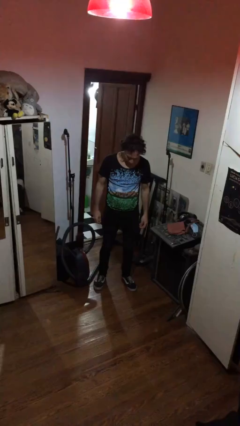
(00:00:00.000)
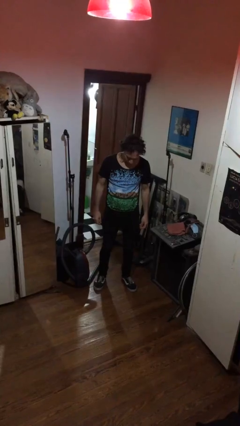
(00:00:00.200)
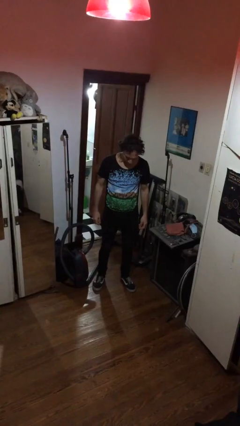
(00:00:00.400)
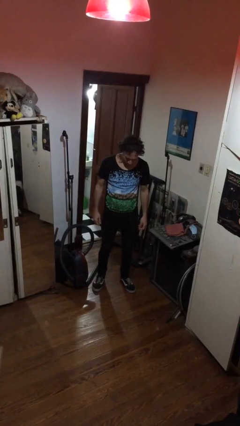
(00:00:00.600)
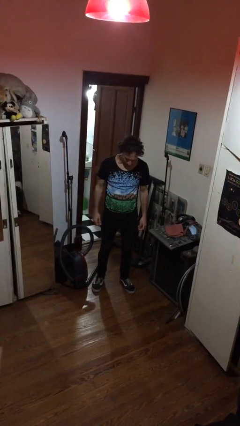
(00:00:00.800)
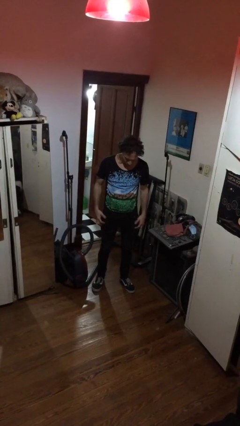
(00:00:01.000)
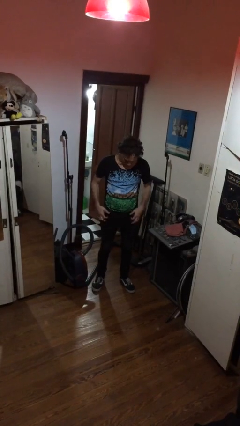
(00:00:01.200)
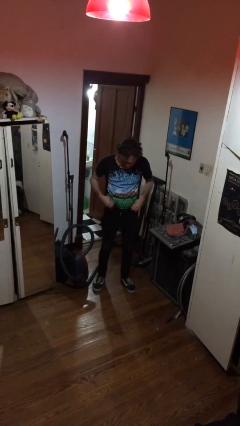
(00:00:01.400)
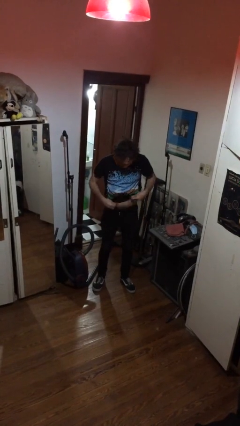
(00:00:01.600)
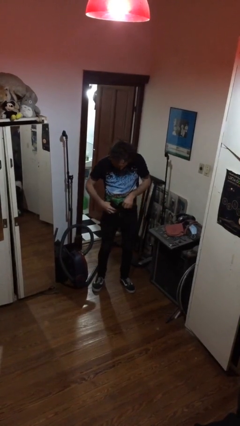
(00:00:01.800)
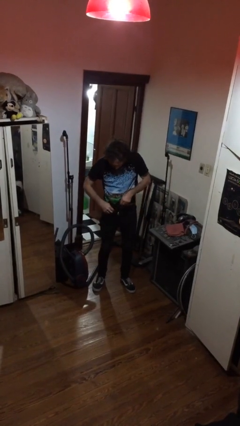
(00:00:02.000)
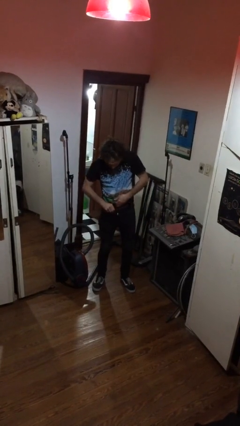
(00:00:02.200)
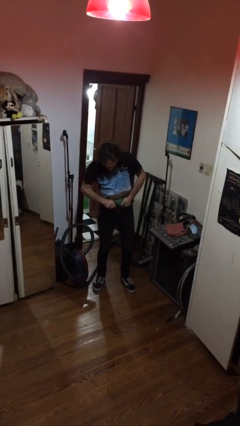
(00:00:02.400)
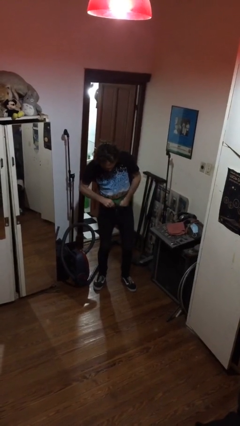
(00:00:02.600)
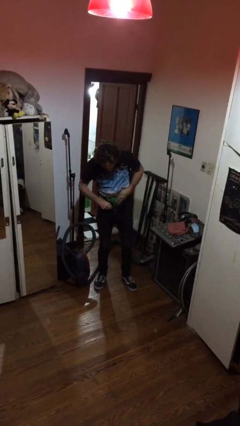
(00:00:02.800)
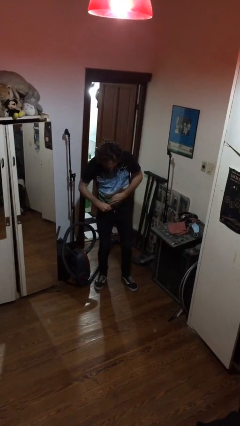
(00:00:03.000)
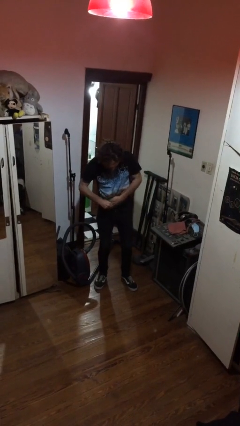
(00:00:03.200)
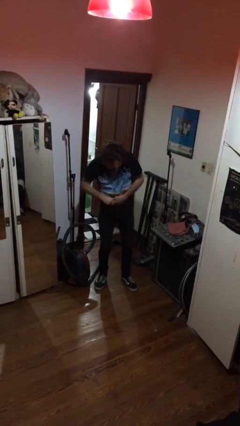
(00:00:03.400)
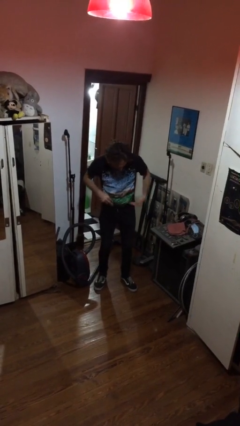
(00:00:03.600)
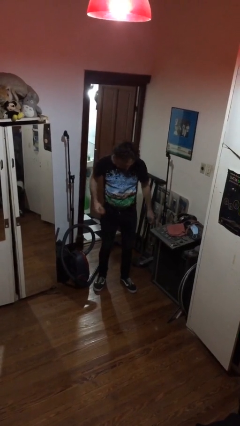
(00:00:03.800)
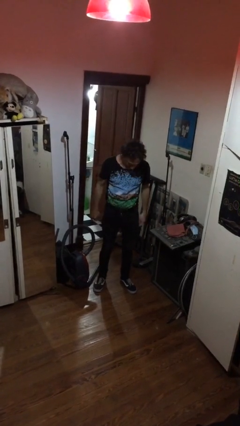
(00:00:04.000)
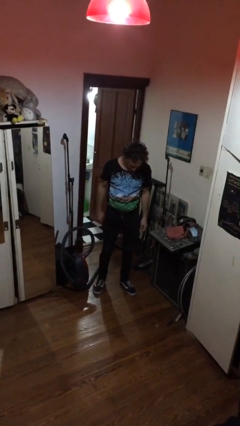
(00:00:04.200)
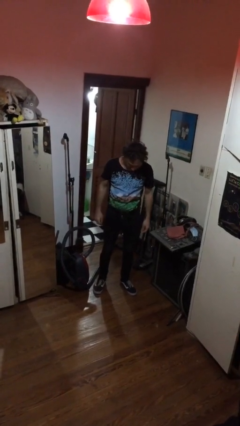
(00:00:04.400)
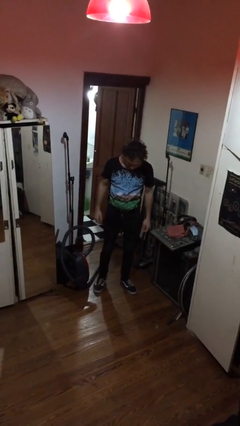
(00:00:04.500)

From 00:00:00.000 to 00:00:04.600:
person tucks in shirt

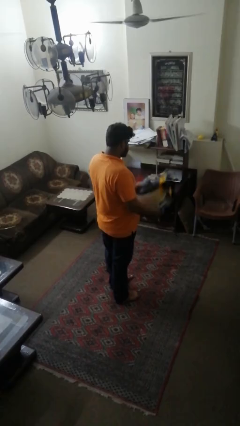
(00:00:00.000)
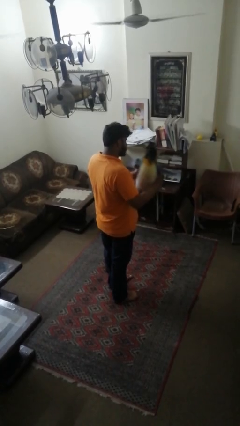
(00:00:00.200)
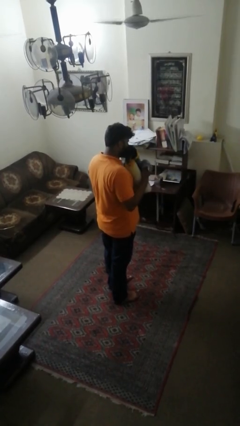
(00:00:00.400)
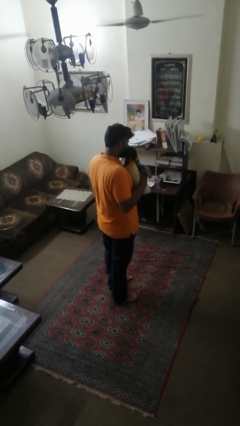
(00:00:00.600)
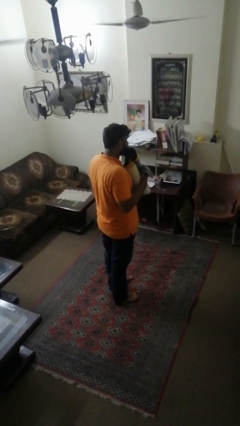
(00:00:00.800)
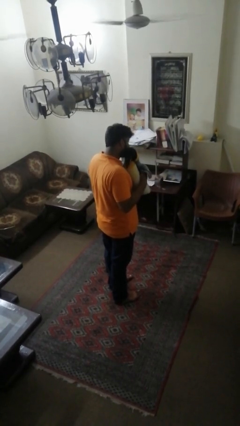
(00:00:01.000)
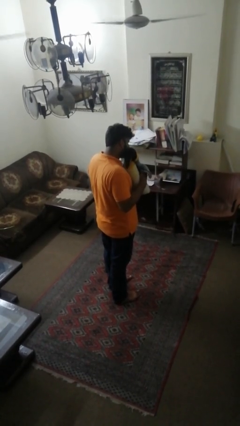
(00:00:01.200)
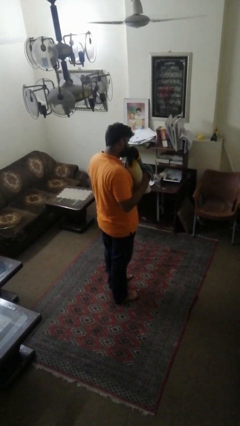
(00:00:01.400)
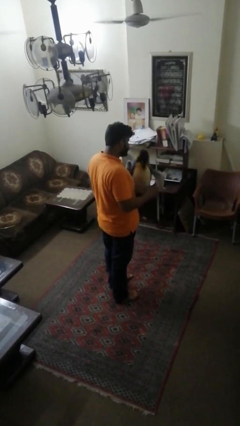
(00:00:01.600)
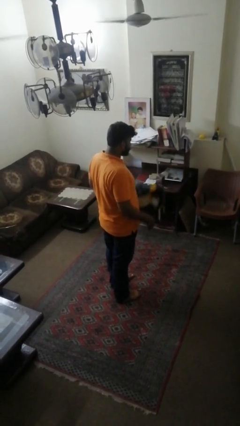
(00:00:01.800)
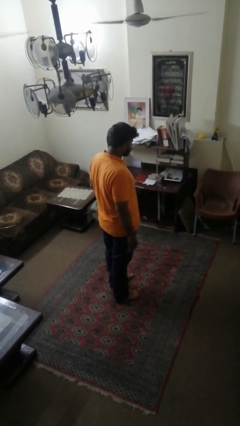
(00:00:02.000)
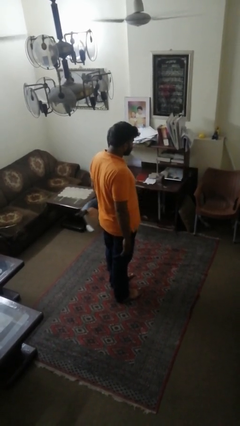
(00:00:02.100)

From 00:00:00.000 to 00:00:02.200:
person hugs stuffed animal

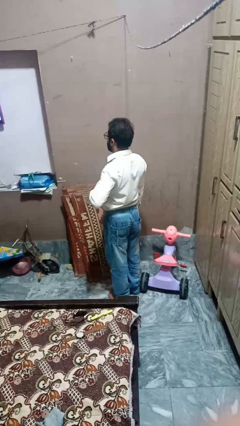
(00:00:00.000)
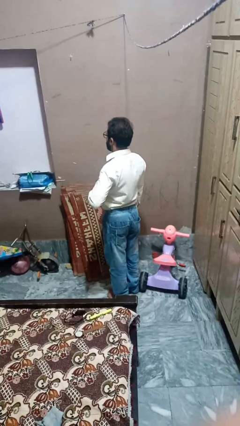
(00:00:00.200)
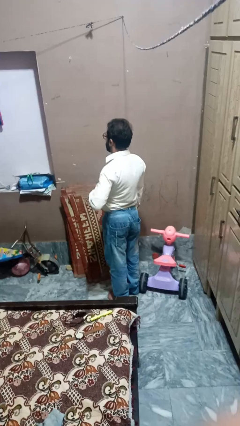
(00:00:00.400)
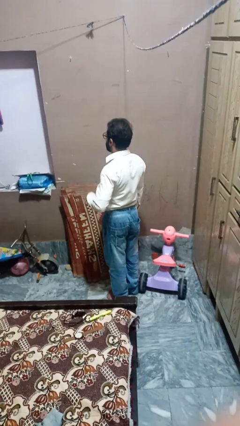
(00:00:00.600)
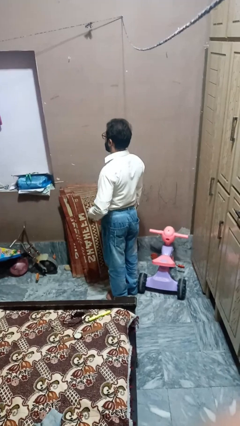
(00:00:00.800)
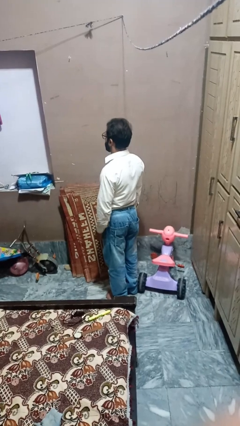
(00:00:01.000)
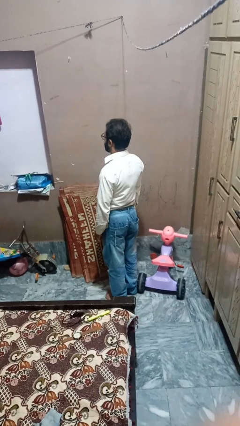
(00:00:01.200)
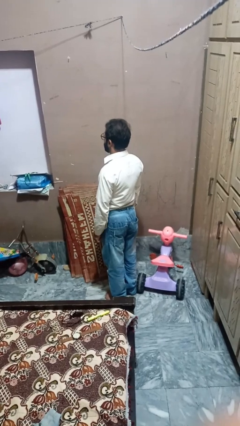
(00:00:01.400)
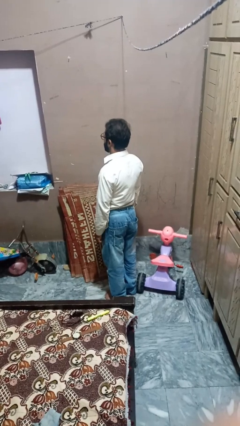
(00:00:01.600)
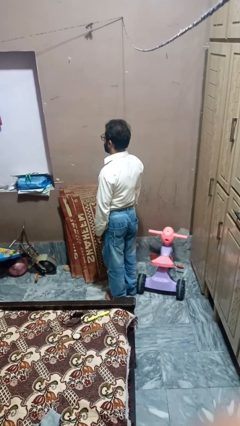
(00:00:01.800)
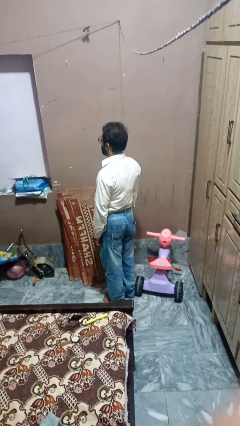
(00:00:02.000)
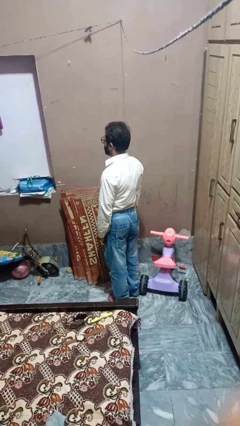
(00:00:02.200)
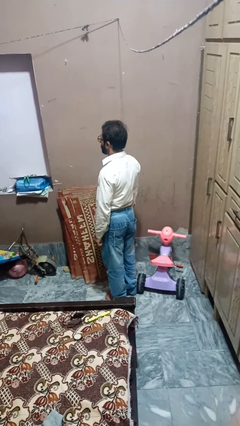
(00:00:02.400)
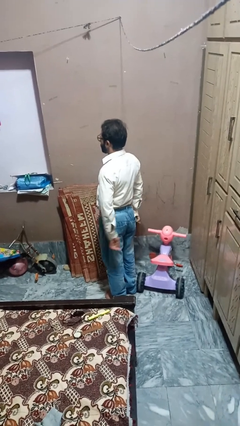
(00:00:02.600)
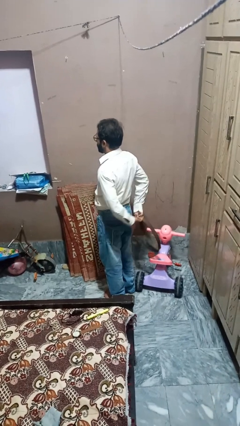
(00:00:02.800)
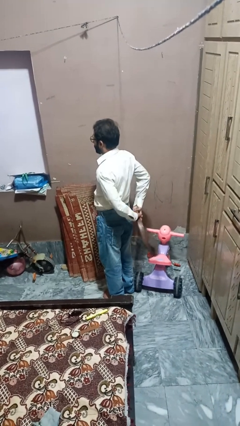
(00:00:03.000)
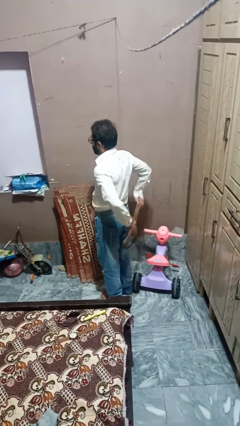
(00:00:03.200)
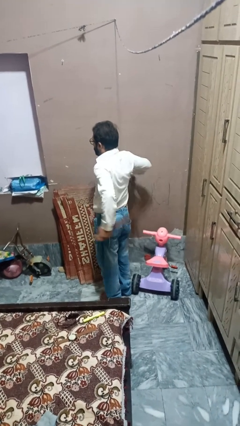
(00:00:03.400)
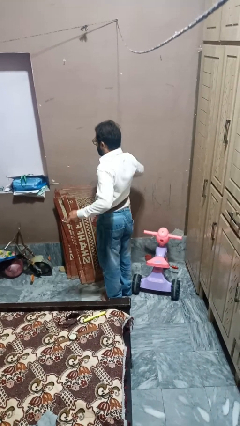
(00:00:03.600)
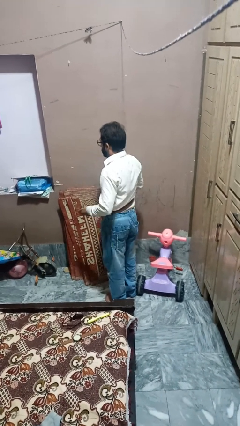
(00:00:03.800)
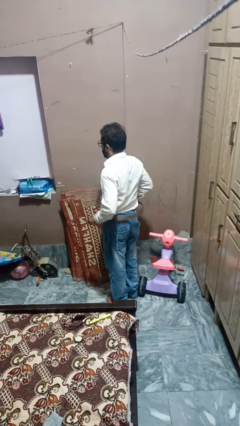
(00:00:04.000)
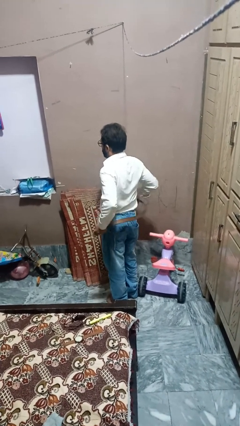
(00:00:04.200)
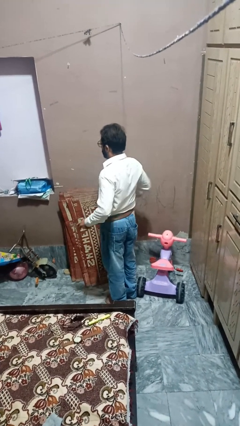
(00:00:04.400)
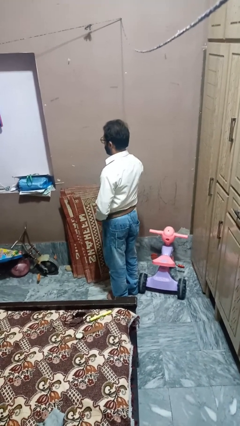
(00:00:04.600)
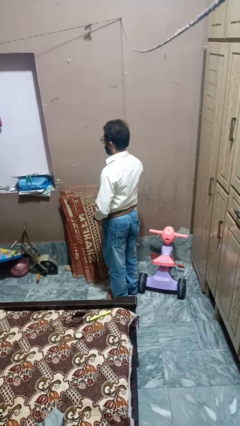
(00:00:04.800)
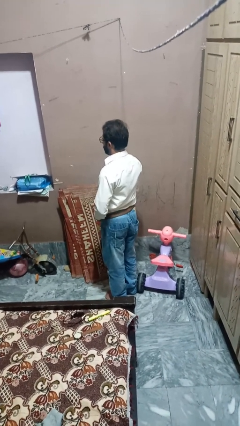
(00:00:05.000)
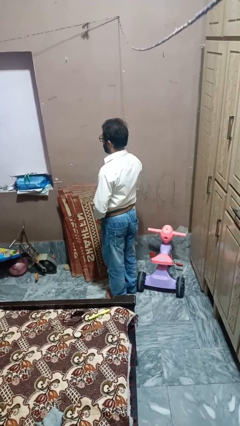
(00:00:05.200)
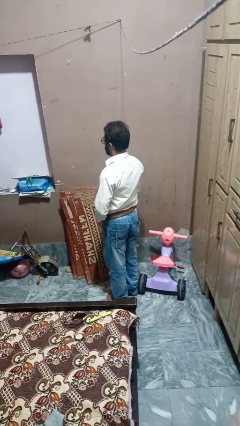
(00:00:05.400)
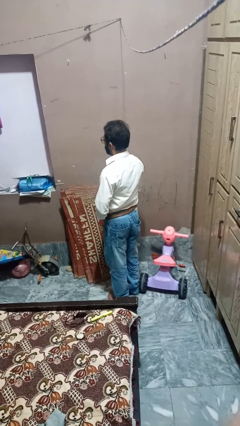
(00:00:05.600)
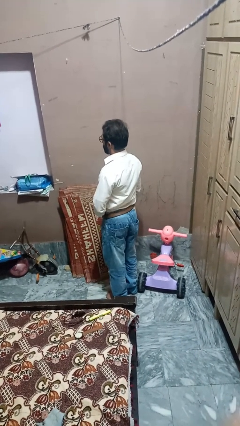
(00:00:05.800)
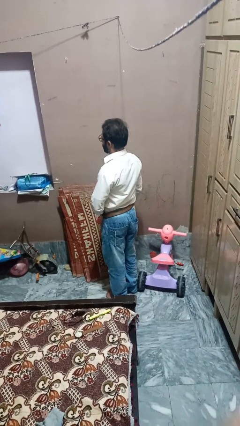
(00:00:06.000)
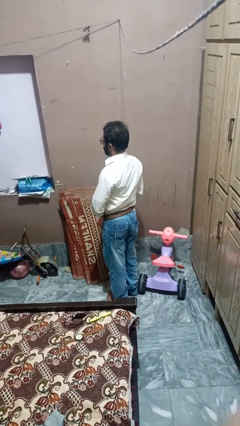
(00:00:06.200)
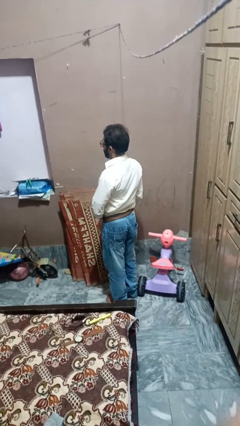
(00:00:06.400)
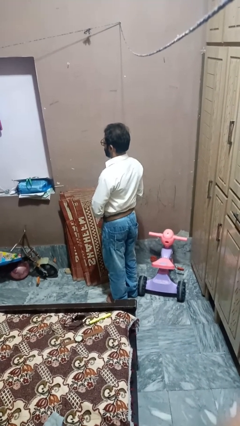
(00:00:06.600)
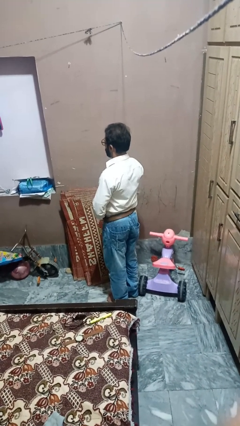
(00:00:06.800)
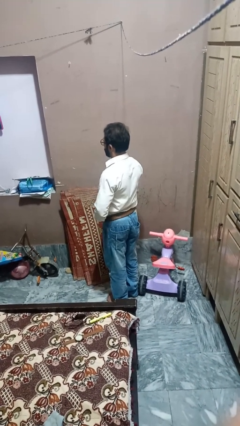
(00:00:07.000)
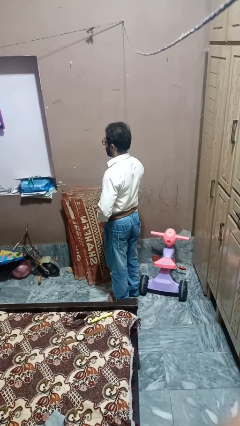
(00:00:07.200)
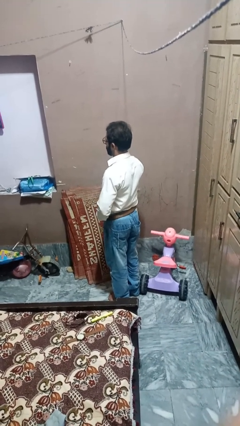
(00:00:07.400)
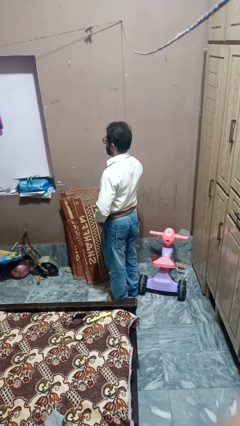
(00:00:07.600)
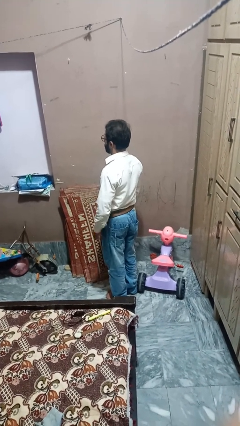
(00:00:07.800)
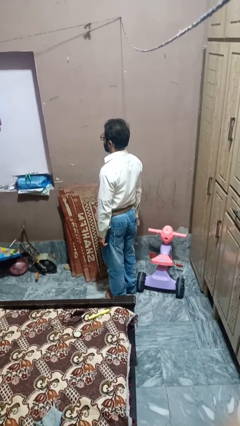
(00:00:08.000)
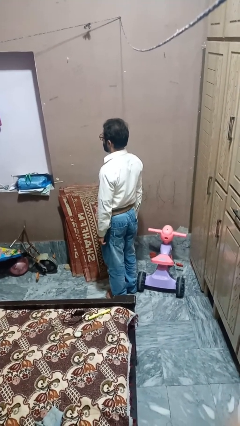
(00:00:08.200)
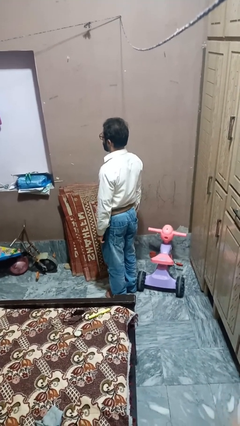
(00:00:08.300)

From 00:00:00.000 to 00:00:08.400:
person puts on belt

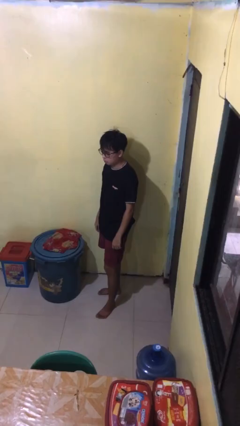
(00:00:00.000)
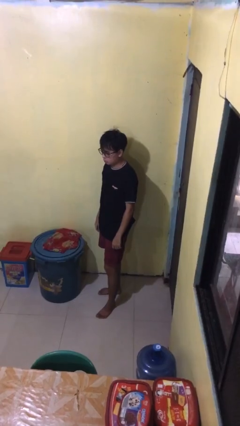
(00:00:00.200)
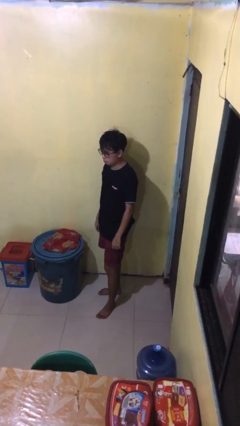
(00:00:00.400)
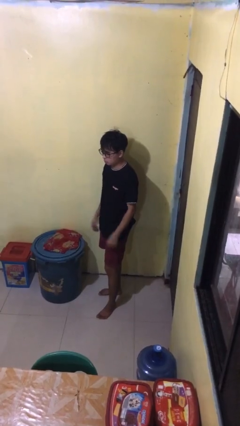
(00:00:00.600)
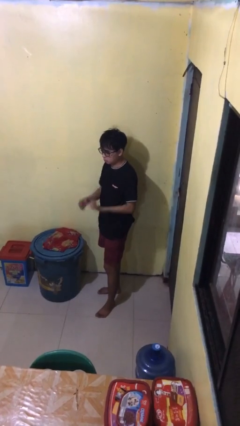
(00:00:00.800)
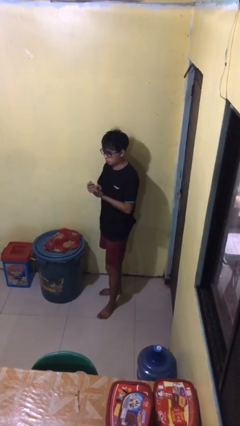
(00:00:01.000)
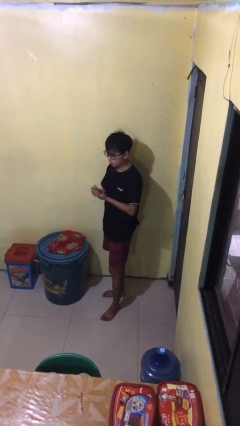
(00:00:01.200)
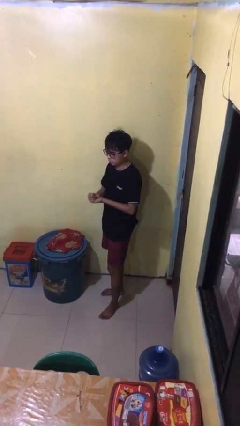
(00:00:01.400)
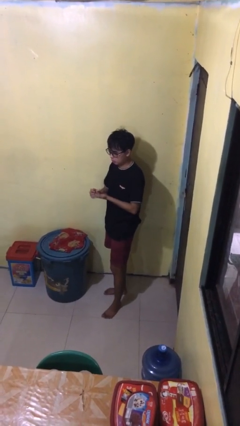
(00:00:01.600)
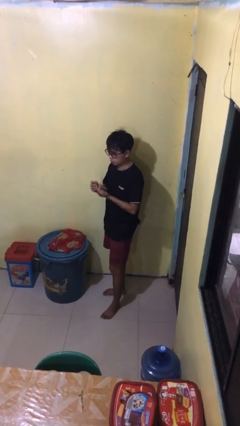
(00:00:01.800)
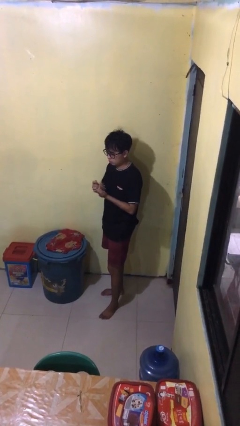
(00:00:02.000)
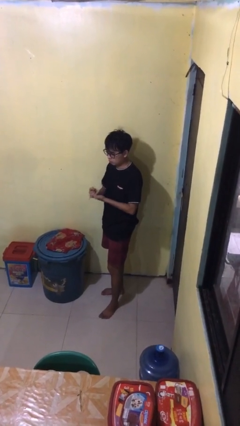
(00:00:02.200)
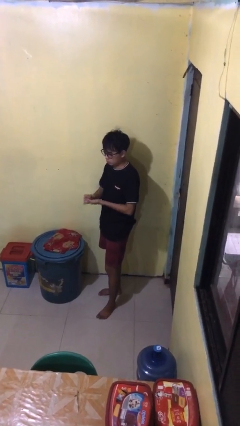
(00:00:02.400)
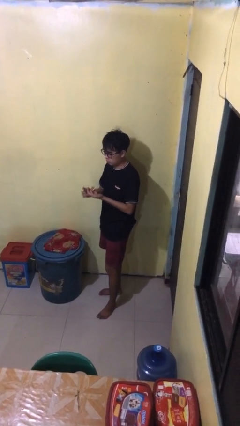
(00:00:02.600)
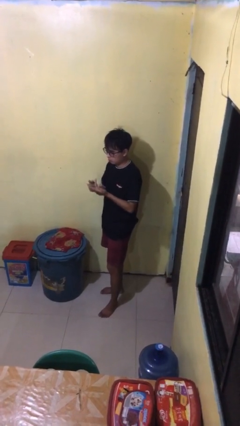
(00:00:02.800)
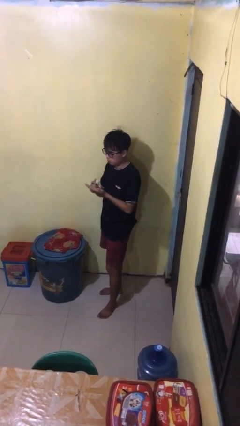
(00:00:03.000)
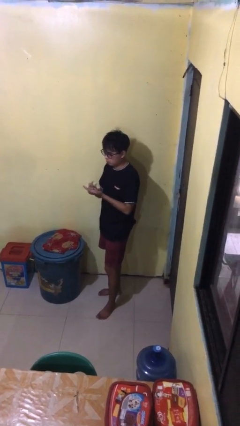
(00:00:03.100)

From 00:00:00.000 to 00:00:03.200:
person cracks knuckles
